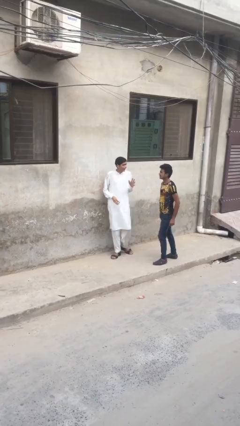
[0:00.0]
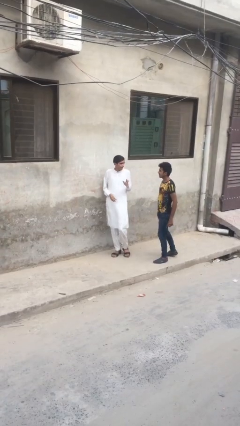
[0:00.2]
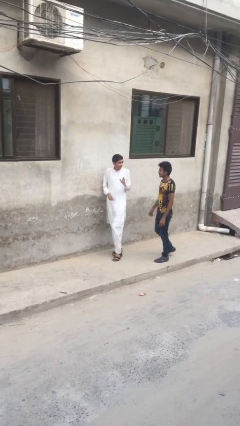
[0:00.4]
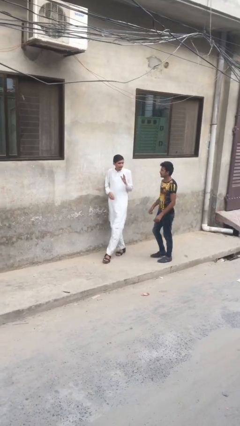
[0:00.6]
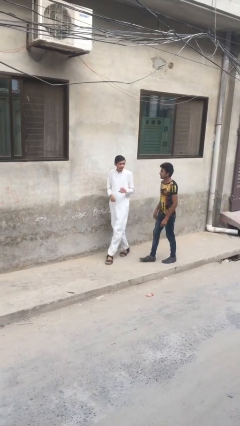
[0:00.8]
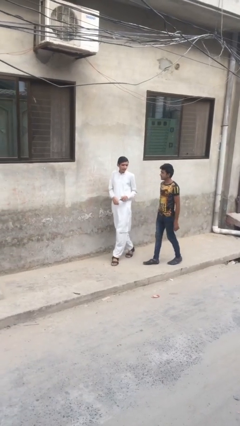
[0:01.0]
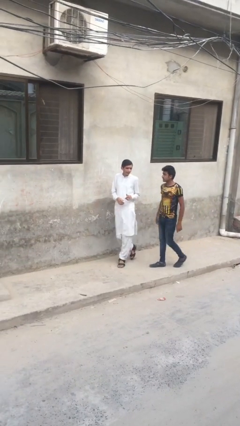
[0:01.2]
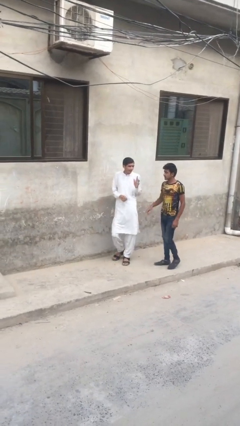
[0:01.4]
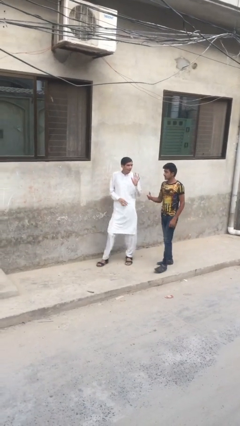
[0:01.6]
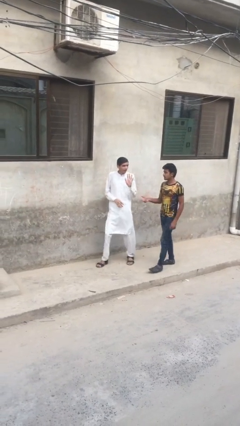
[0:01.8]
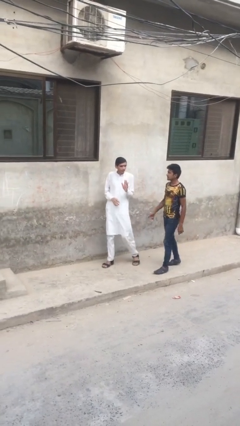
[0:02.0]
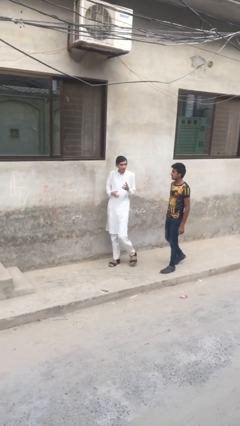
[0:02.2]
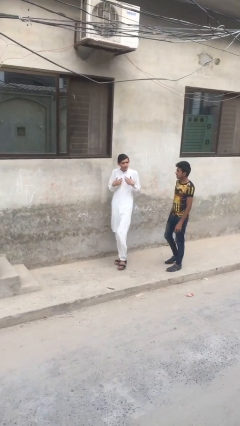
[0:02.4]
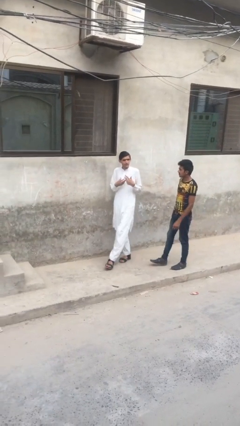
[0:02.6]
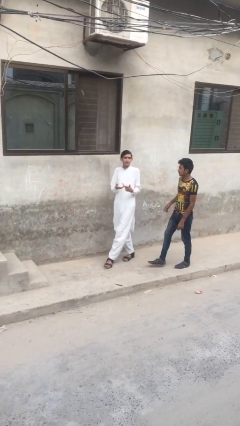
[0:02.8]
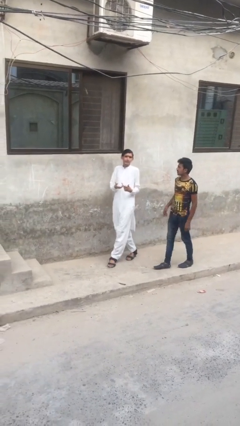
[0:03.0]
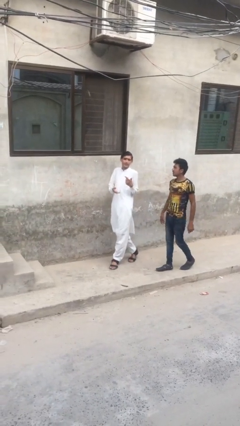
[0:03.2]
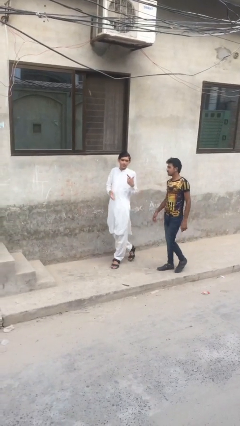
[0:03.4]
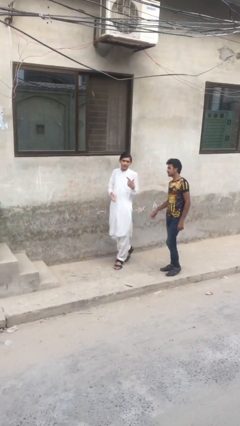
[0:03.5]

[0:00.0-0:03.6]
person talks to person

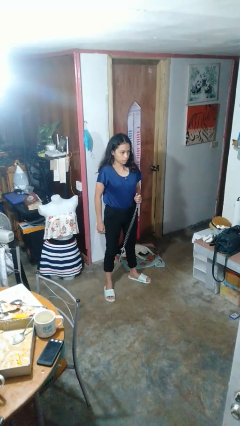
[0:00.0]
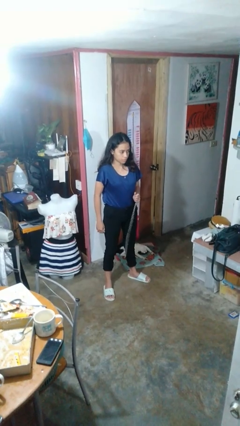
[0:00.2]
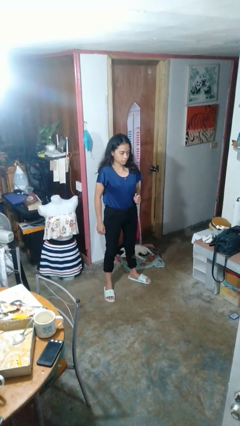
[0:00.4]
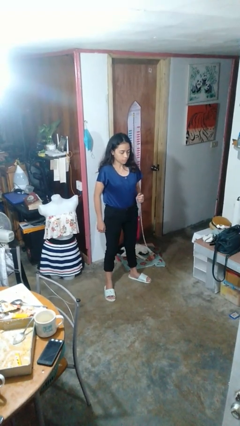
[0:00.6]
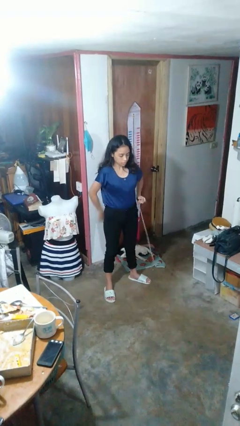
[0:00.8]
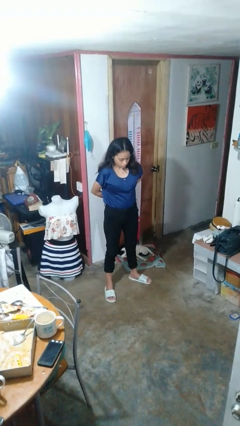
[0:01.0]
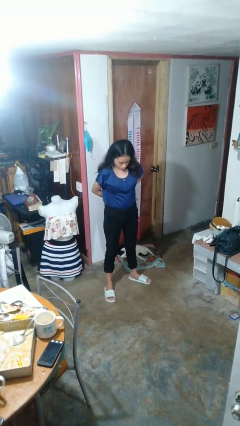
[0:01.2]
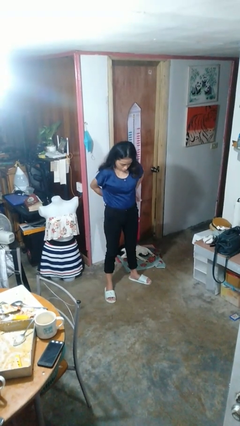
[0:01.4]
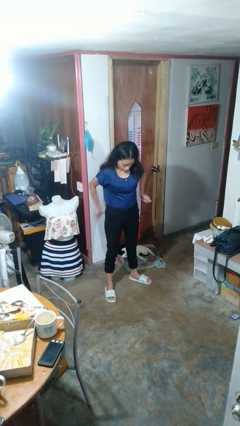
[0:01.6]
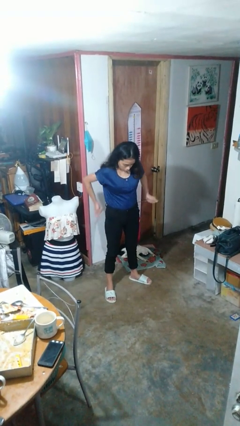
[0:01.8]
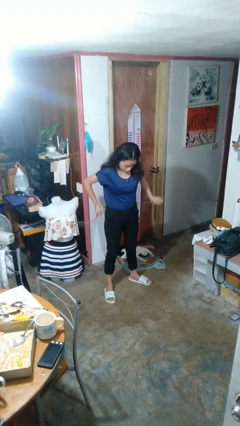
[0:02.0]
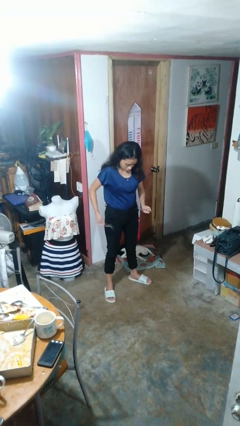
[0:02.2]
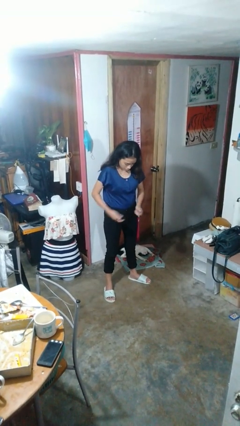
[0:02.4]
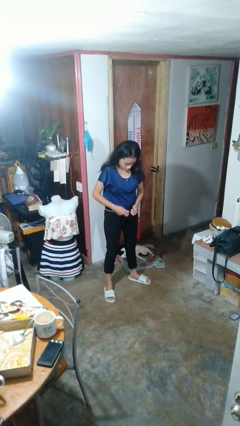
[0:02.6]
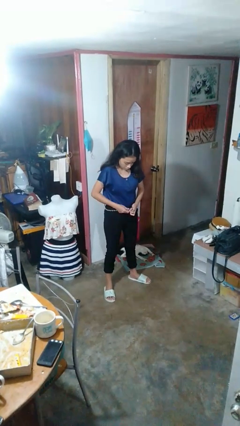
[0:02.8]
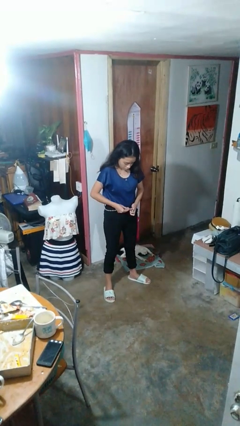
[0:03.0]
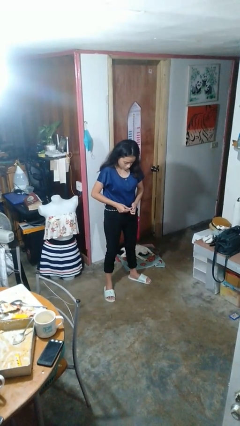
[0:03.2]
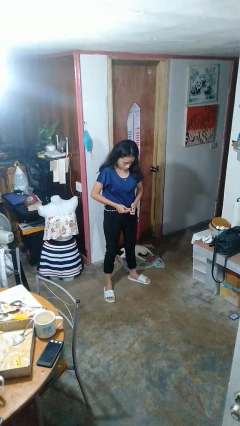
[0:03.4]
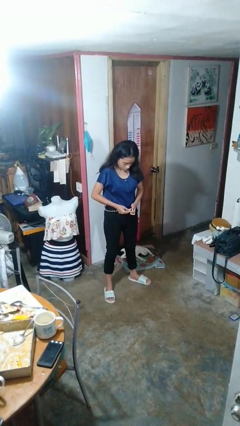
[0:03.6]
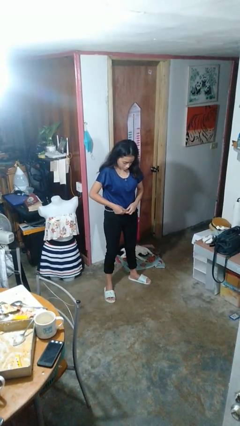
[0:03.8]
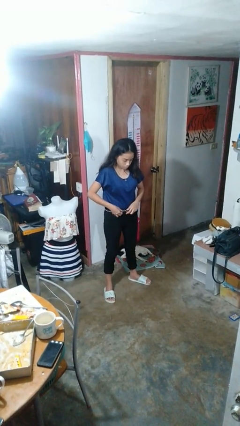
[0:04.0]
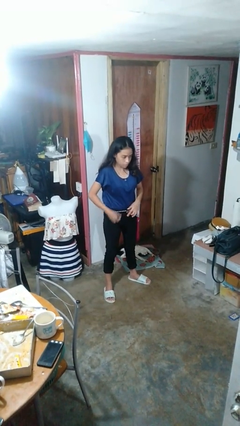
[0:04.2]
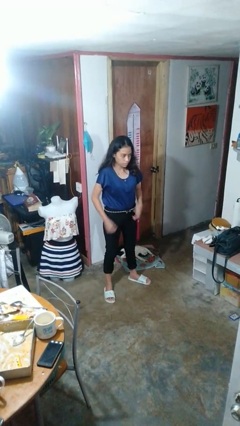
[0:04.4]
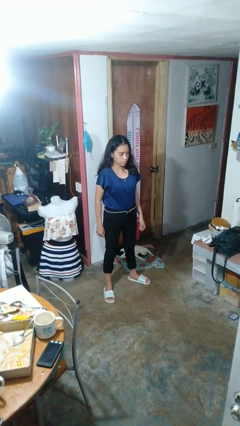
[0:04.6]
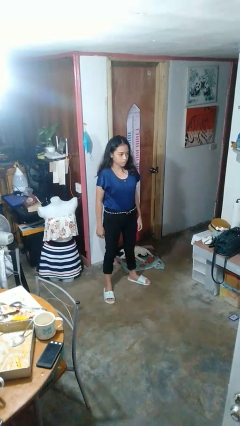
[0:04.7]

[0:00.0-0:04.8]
person puts on belt

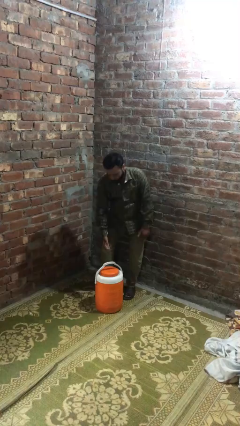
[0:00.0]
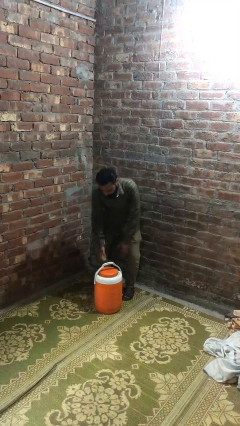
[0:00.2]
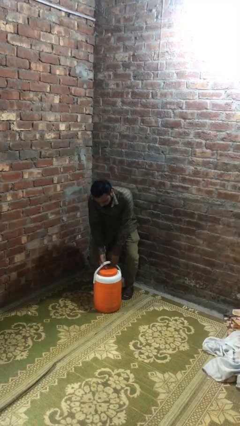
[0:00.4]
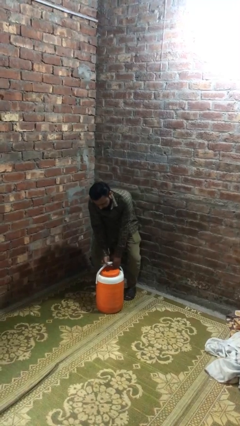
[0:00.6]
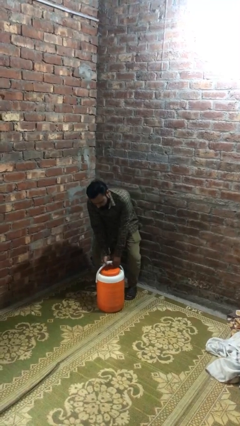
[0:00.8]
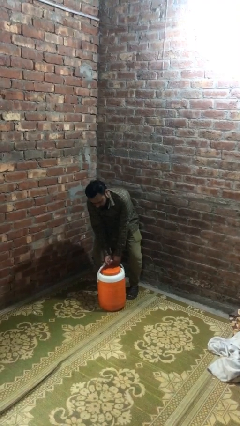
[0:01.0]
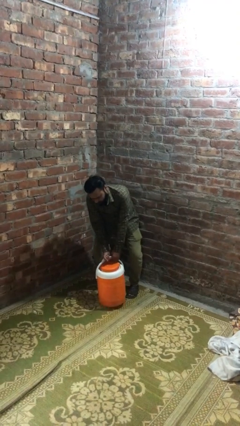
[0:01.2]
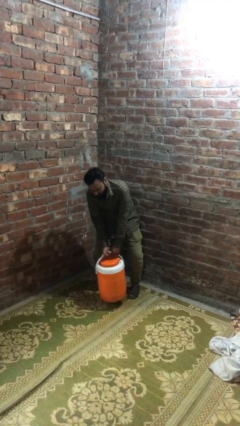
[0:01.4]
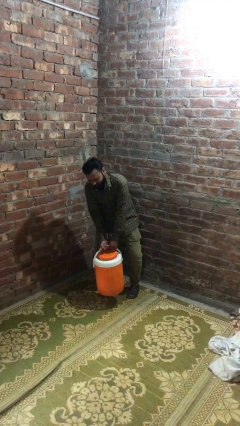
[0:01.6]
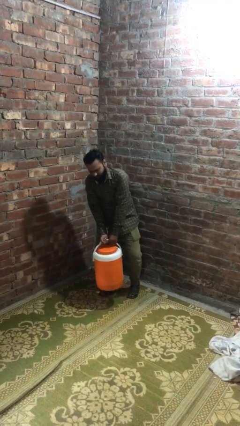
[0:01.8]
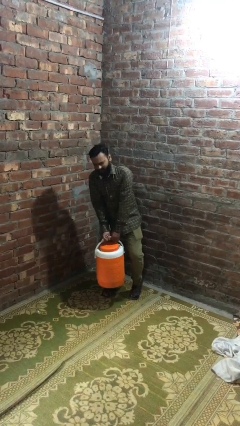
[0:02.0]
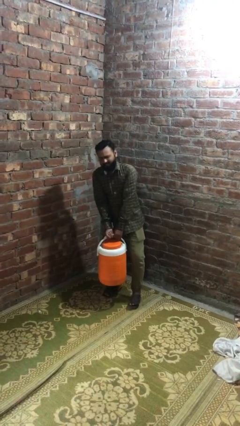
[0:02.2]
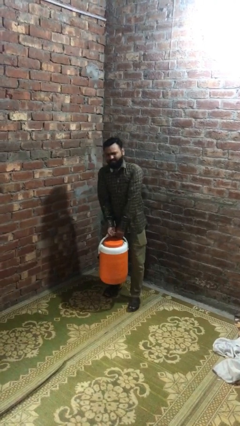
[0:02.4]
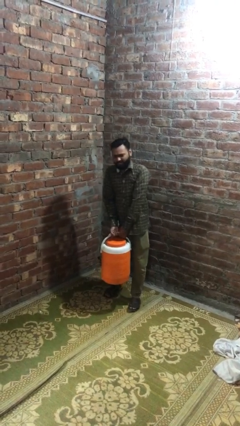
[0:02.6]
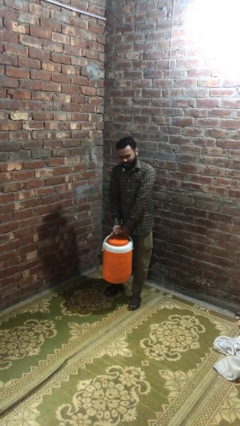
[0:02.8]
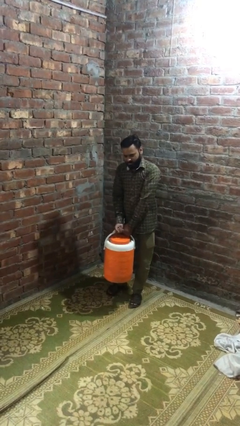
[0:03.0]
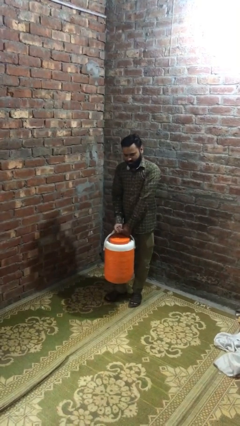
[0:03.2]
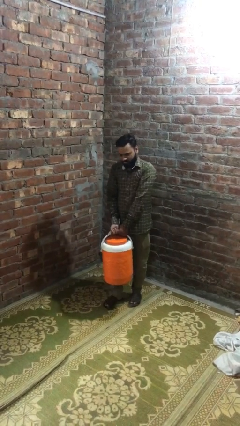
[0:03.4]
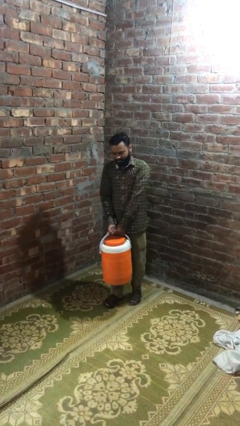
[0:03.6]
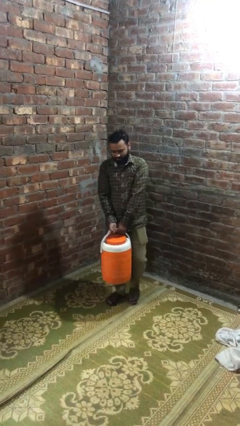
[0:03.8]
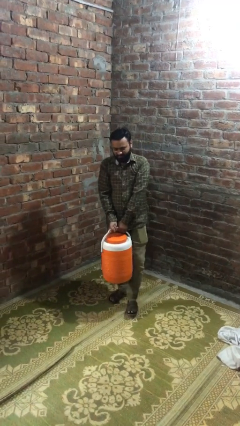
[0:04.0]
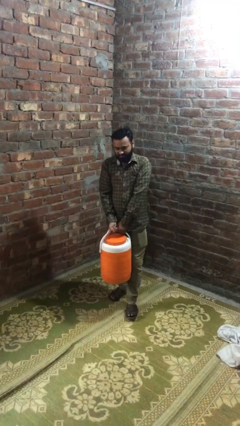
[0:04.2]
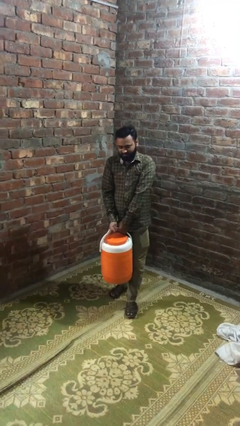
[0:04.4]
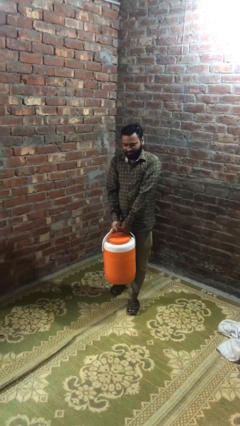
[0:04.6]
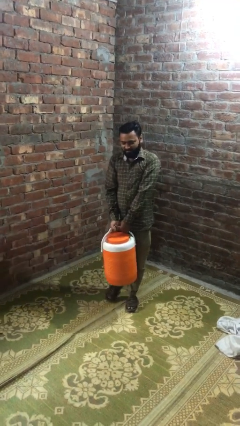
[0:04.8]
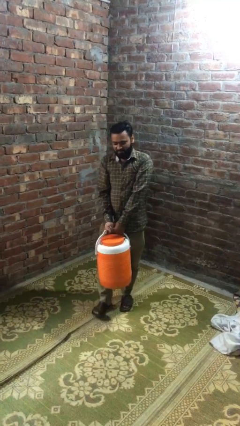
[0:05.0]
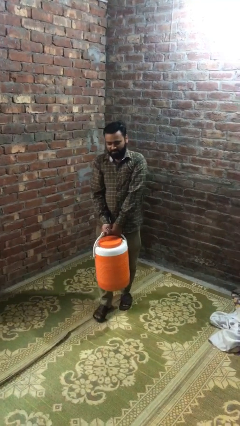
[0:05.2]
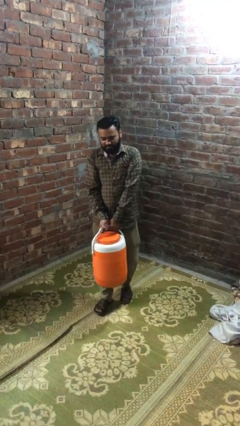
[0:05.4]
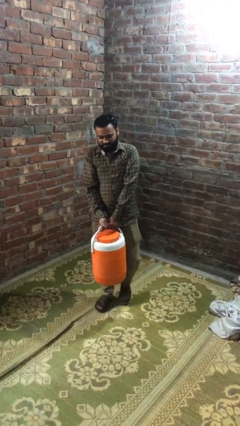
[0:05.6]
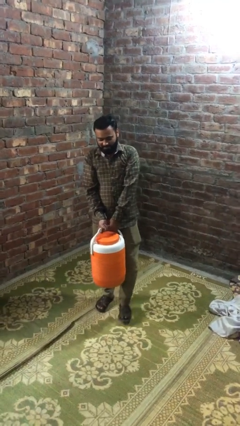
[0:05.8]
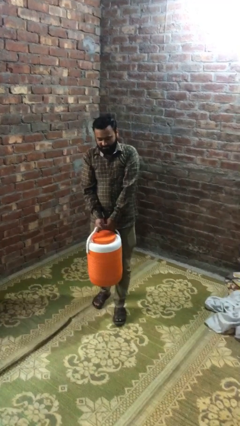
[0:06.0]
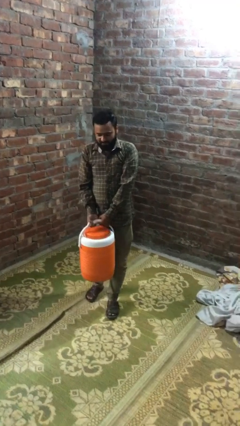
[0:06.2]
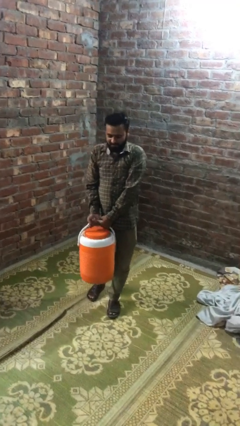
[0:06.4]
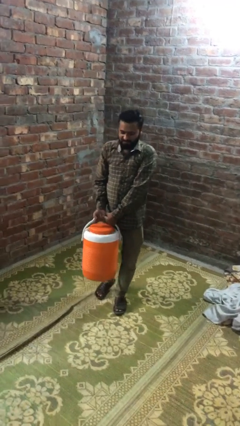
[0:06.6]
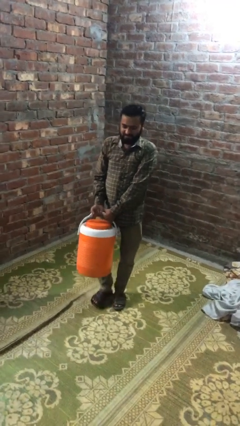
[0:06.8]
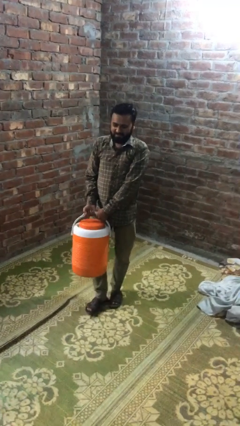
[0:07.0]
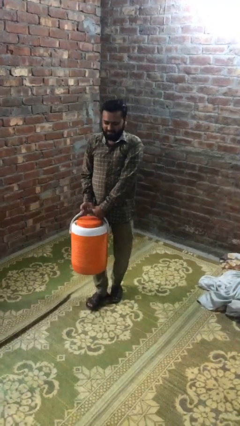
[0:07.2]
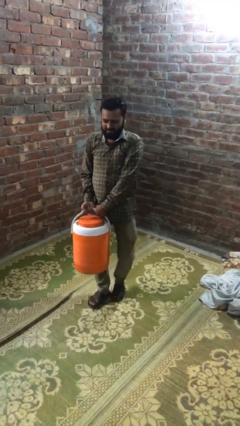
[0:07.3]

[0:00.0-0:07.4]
person carries heavy object

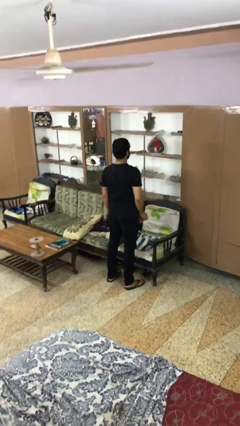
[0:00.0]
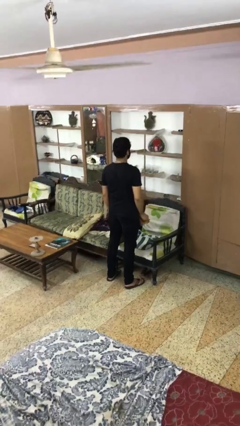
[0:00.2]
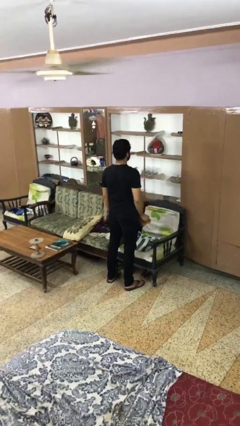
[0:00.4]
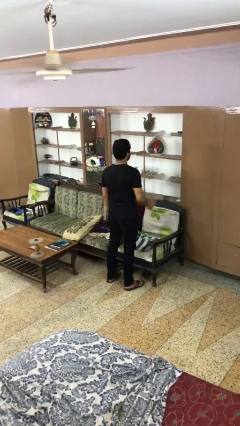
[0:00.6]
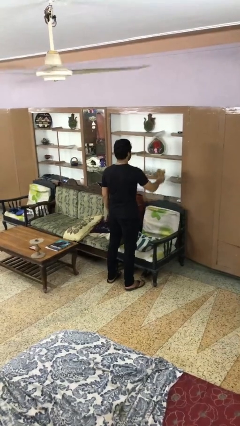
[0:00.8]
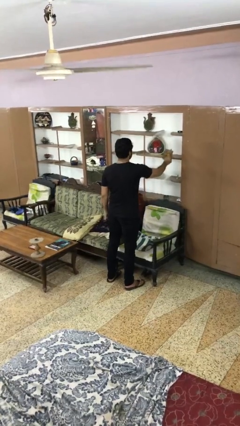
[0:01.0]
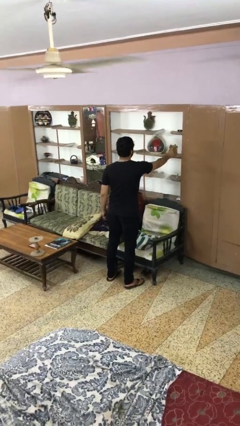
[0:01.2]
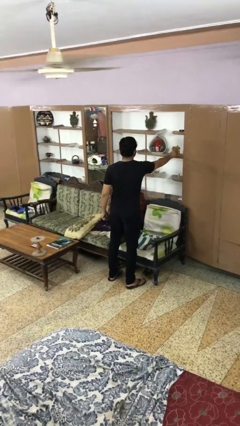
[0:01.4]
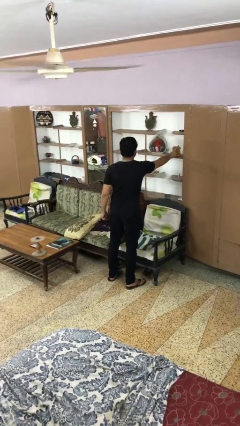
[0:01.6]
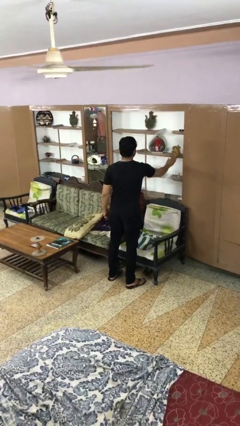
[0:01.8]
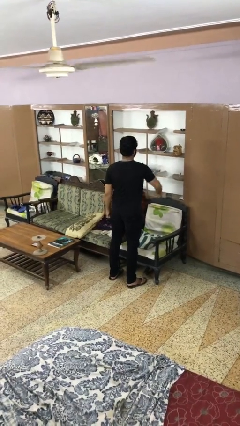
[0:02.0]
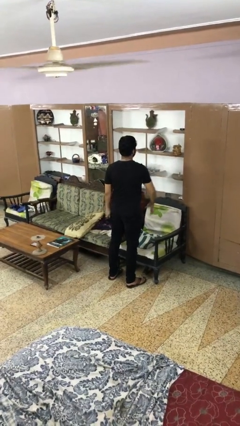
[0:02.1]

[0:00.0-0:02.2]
person puts down object on shelf
